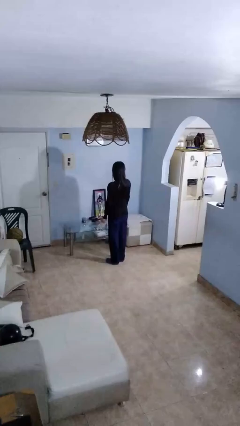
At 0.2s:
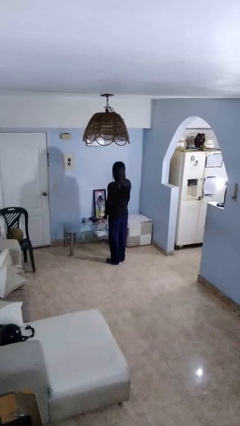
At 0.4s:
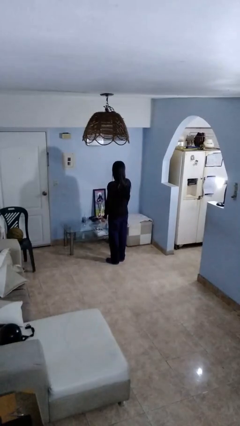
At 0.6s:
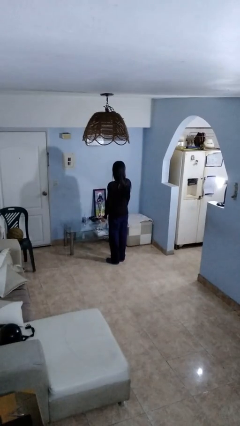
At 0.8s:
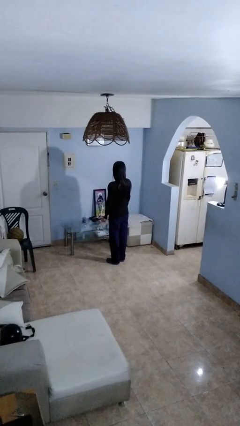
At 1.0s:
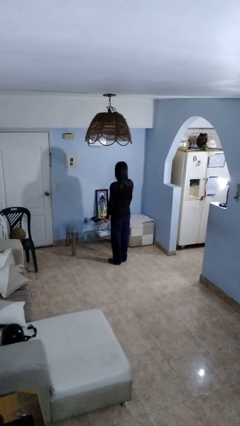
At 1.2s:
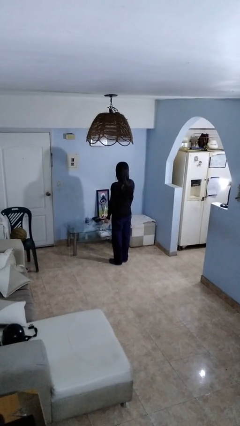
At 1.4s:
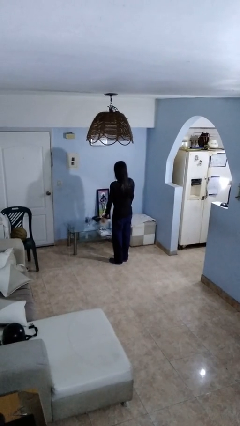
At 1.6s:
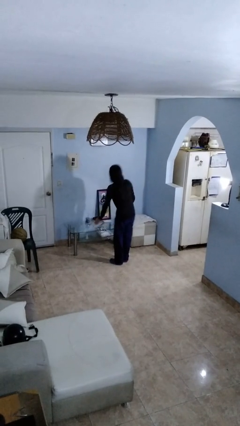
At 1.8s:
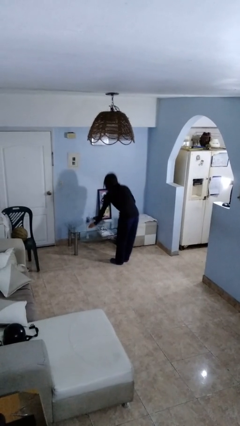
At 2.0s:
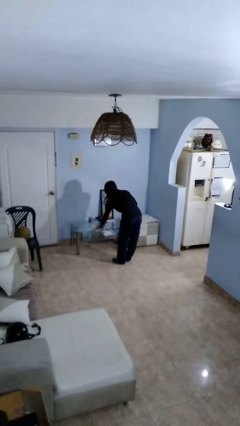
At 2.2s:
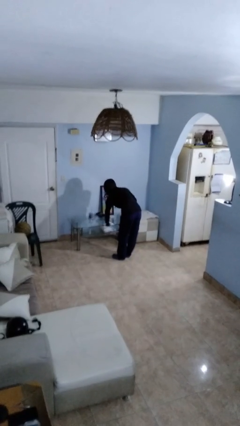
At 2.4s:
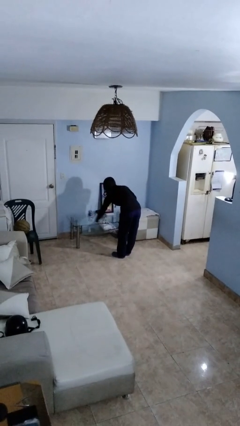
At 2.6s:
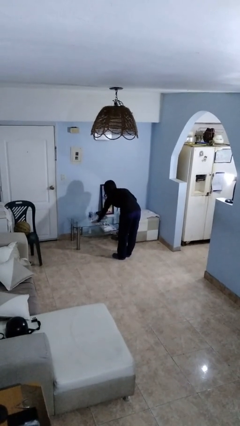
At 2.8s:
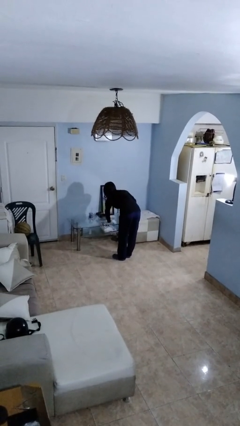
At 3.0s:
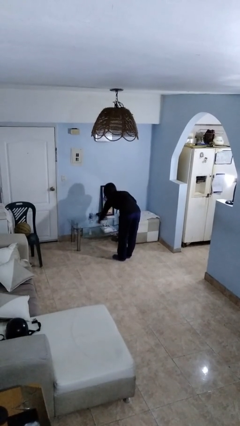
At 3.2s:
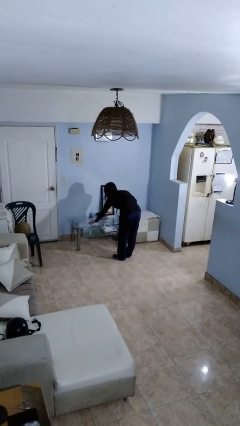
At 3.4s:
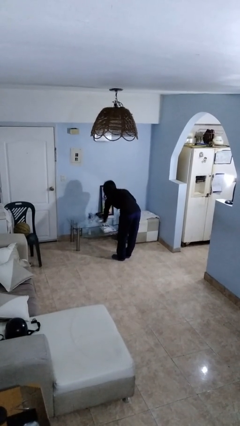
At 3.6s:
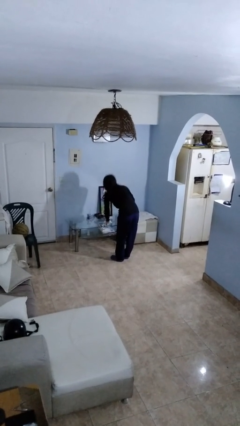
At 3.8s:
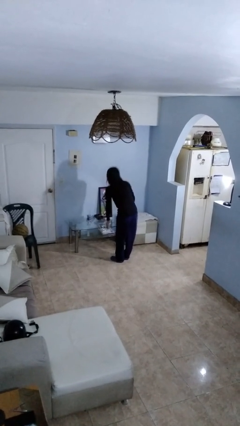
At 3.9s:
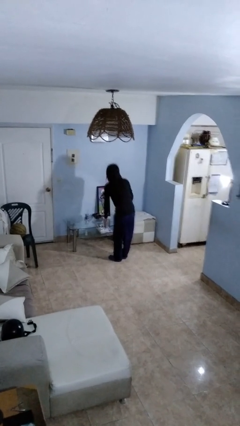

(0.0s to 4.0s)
person cleans table with rag

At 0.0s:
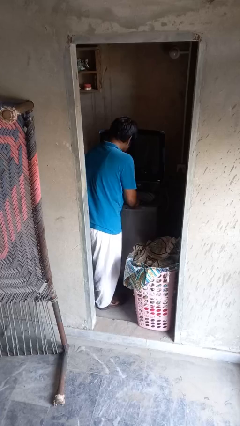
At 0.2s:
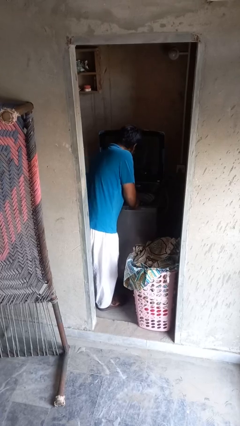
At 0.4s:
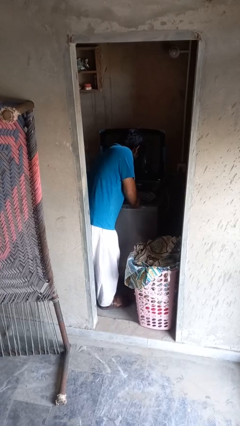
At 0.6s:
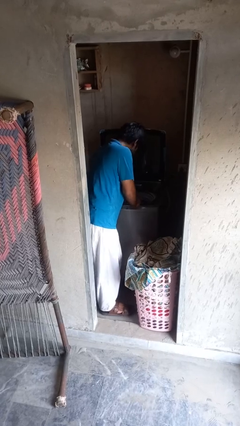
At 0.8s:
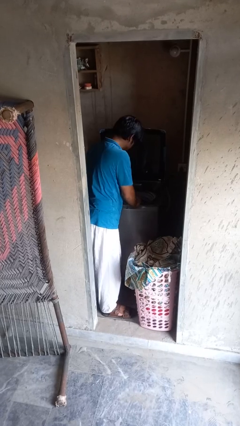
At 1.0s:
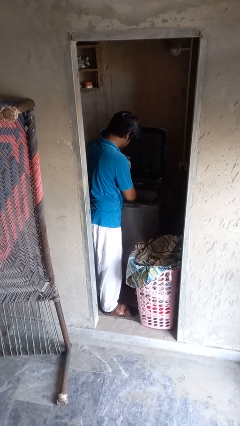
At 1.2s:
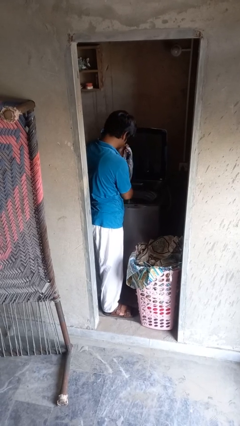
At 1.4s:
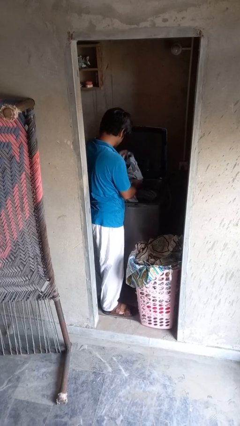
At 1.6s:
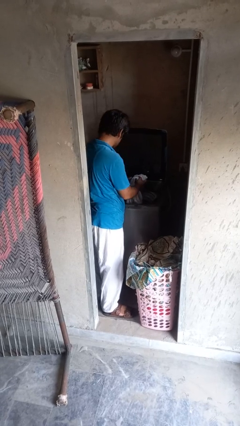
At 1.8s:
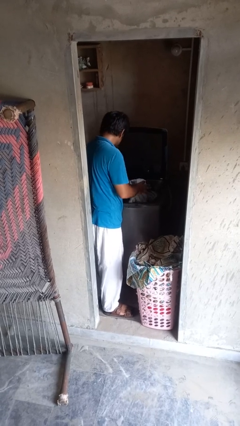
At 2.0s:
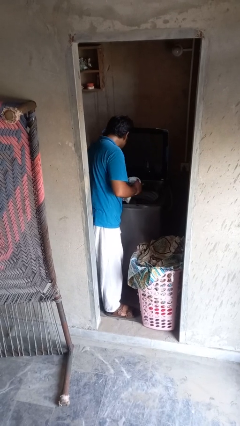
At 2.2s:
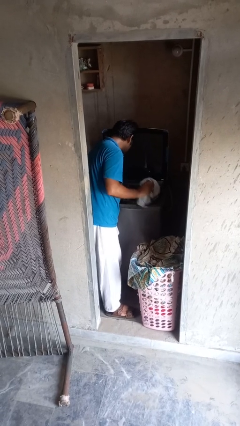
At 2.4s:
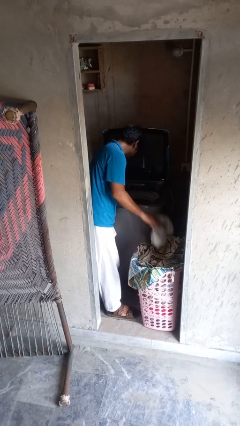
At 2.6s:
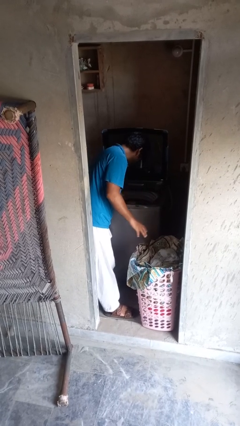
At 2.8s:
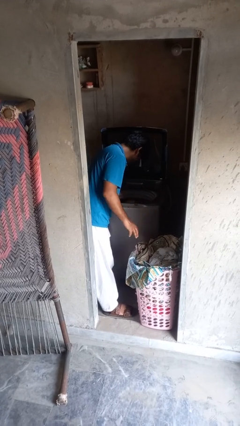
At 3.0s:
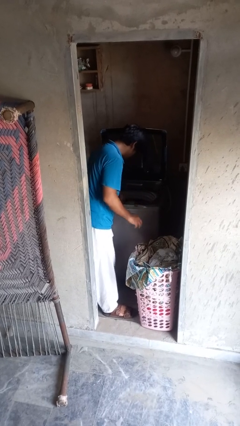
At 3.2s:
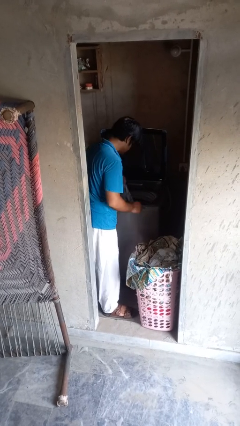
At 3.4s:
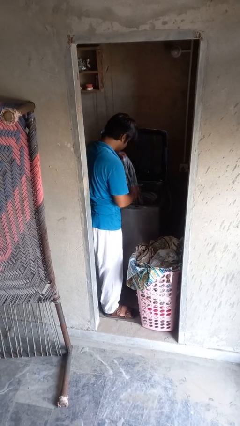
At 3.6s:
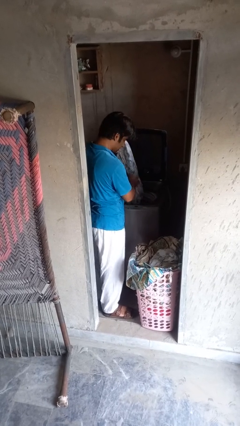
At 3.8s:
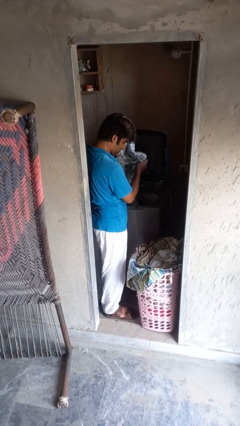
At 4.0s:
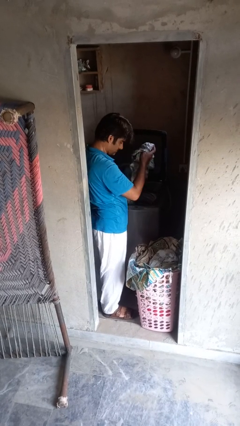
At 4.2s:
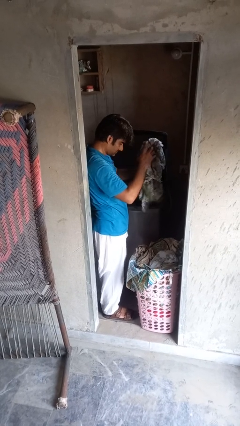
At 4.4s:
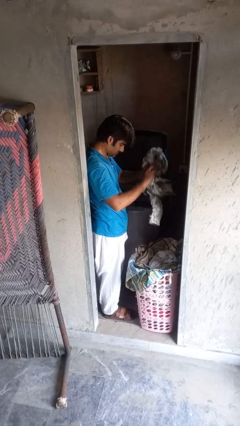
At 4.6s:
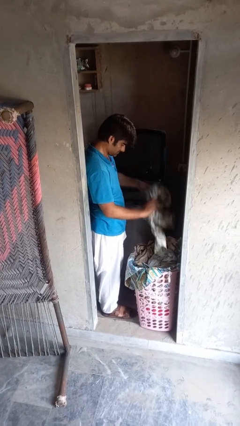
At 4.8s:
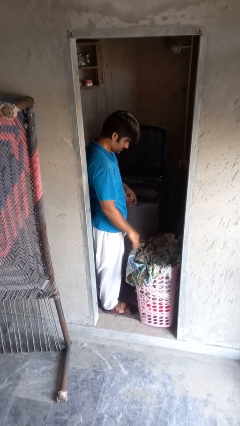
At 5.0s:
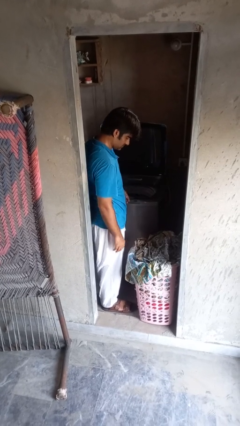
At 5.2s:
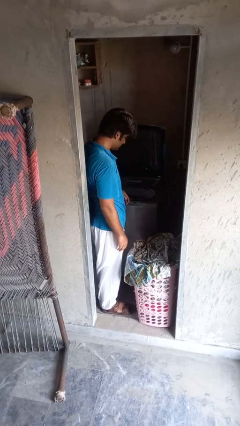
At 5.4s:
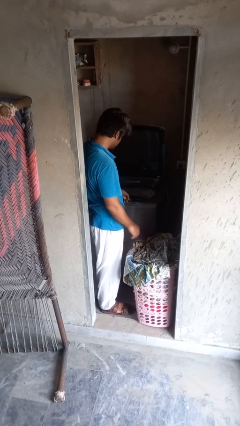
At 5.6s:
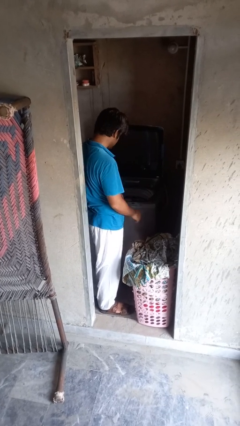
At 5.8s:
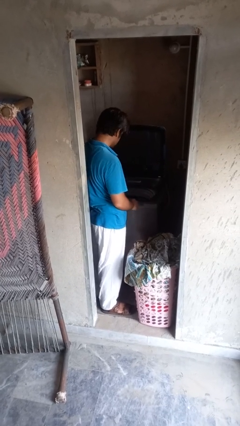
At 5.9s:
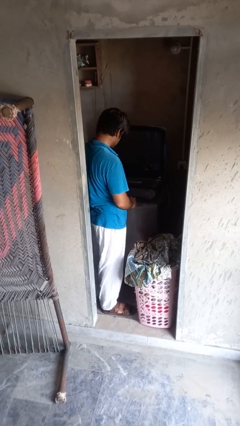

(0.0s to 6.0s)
person loads clotheswasher

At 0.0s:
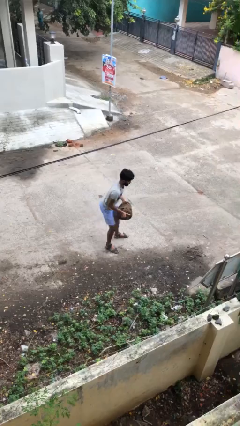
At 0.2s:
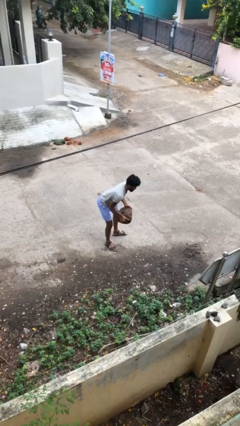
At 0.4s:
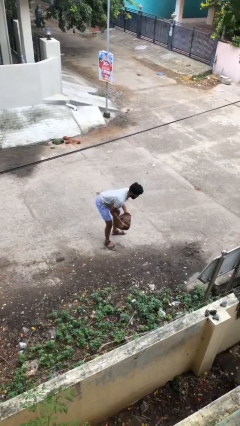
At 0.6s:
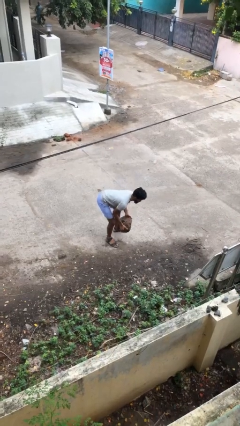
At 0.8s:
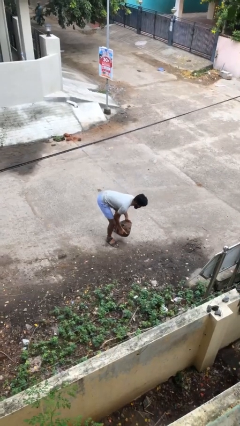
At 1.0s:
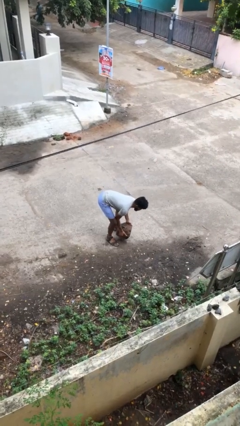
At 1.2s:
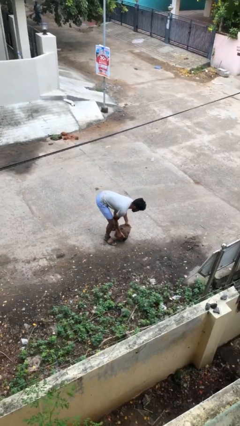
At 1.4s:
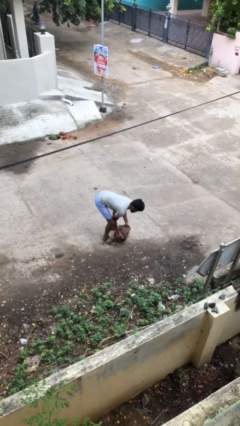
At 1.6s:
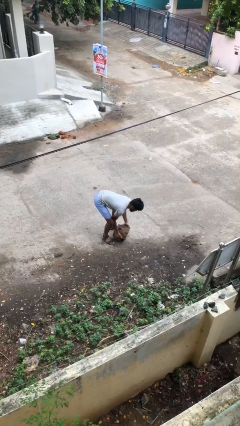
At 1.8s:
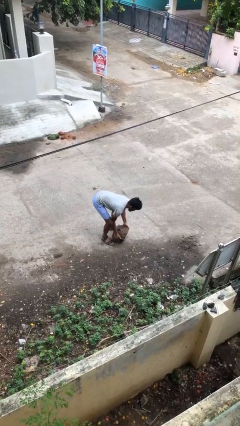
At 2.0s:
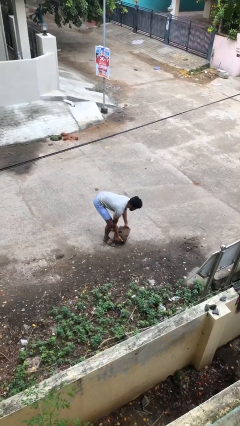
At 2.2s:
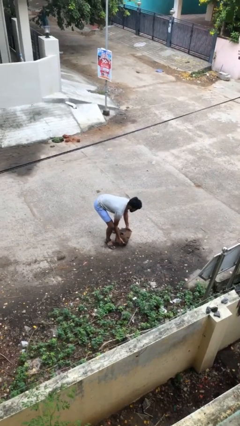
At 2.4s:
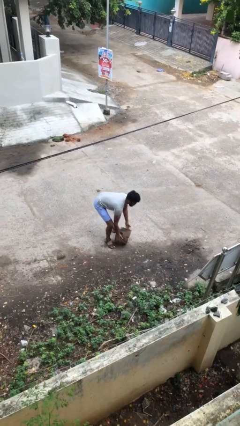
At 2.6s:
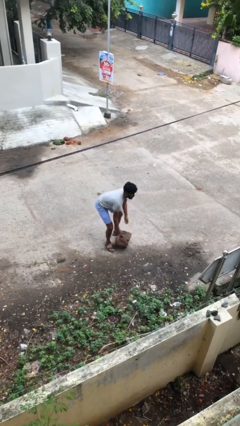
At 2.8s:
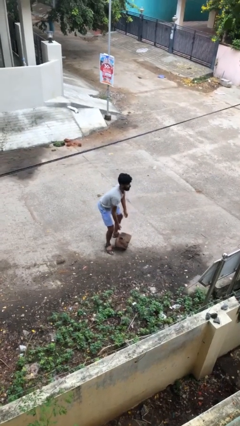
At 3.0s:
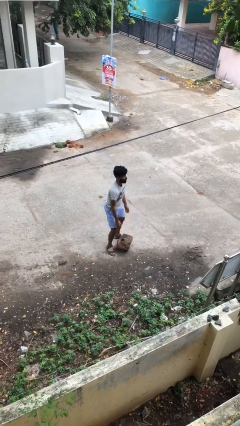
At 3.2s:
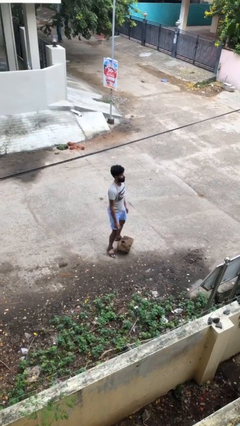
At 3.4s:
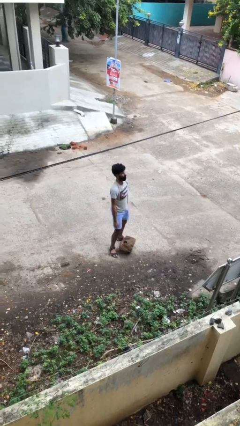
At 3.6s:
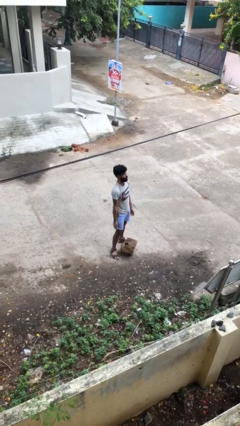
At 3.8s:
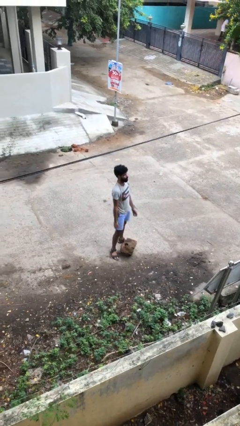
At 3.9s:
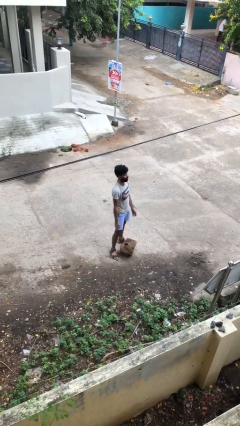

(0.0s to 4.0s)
person puts down object on floor

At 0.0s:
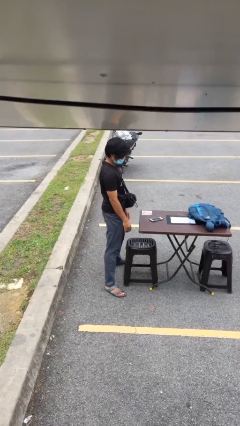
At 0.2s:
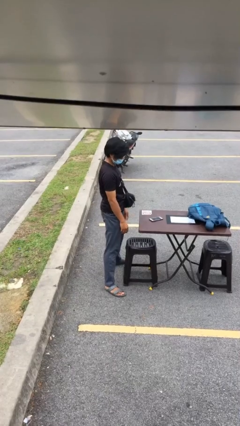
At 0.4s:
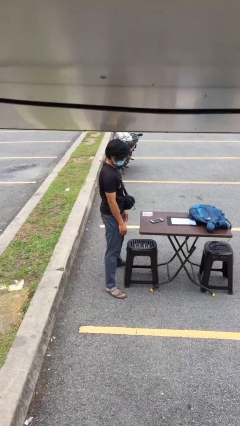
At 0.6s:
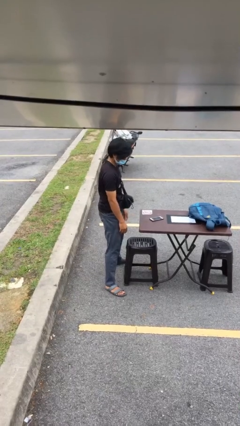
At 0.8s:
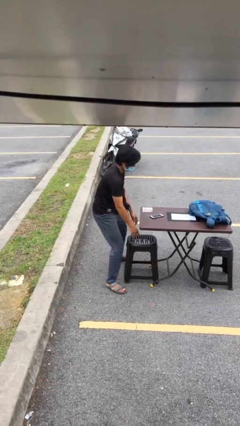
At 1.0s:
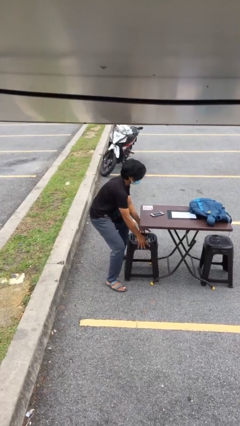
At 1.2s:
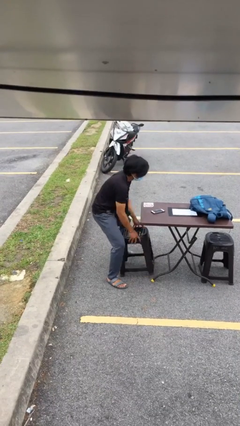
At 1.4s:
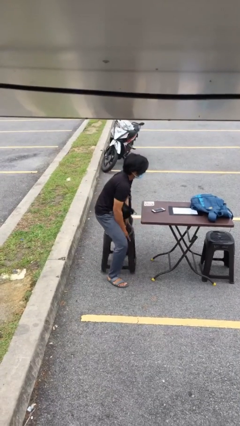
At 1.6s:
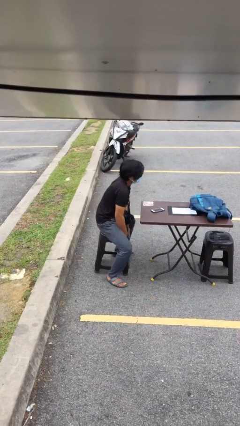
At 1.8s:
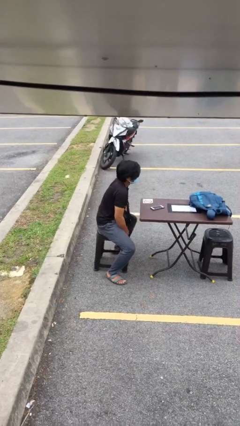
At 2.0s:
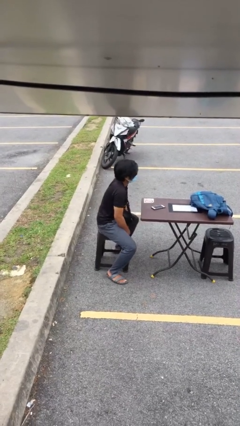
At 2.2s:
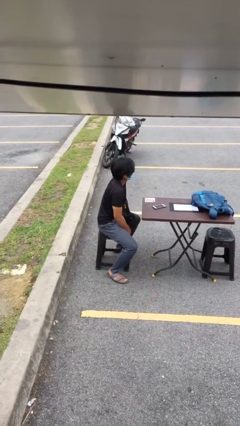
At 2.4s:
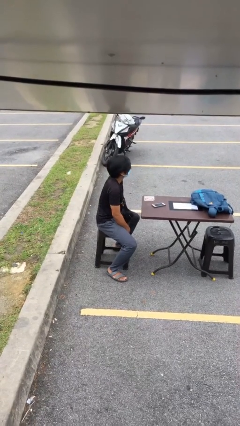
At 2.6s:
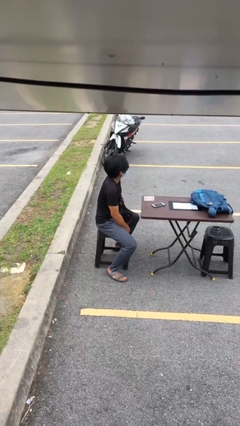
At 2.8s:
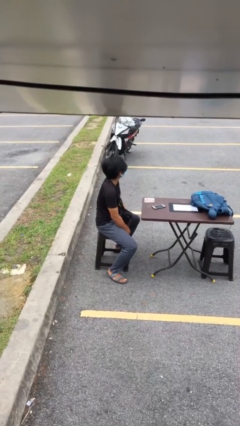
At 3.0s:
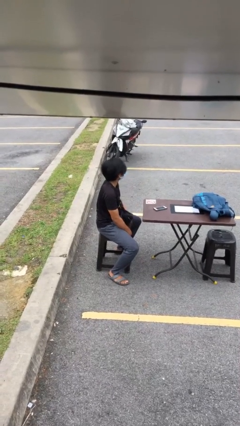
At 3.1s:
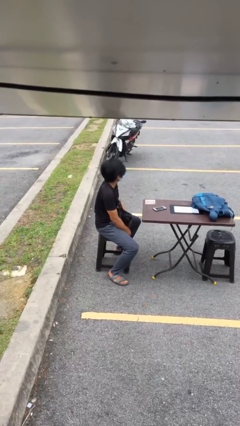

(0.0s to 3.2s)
person sits down

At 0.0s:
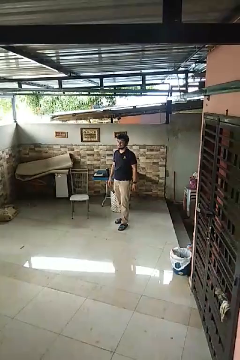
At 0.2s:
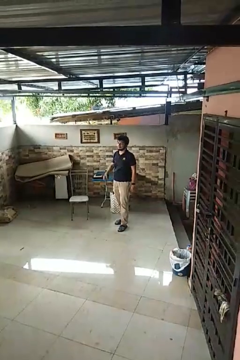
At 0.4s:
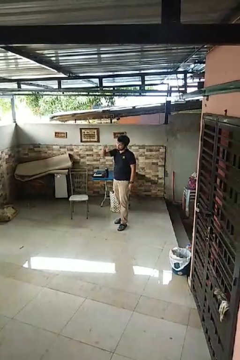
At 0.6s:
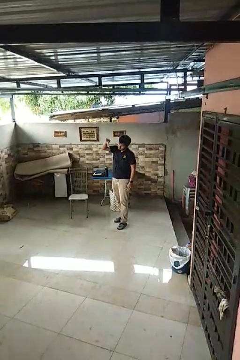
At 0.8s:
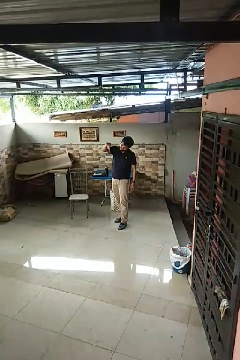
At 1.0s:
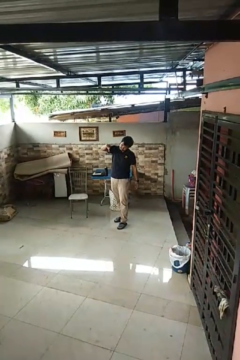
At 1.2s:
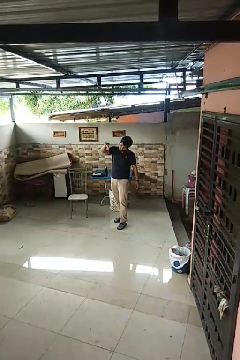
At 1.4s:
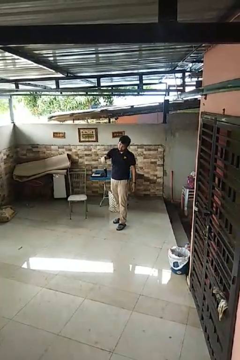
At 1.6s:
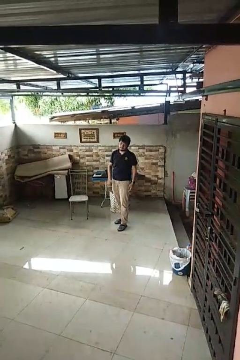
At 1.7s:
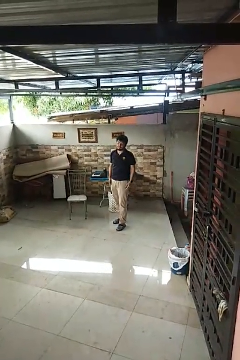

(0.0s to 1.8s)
person gestures thumbs down
